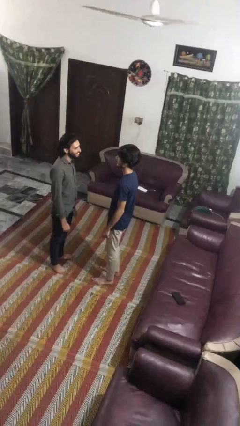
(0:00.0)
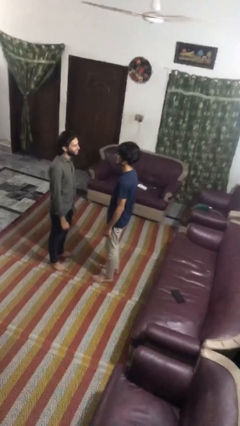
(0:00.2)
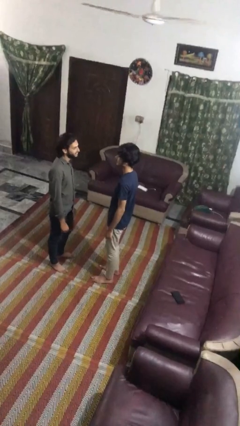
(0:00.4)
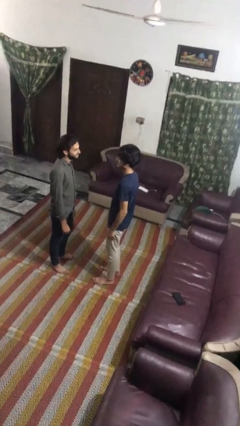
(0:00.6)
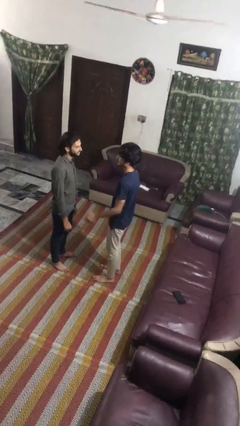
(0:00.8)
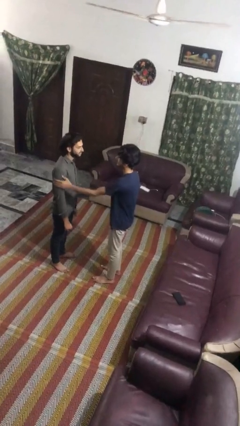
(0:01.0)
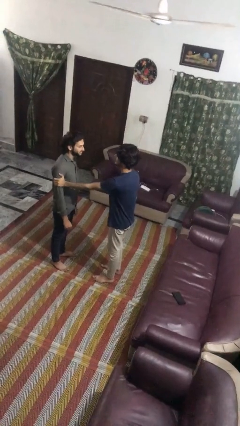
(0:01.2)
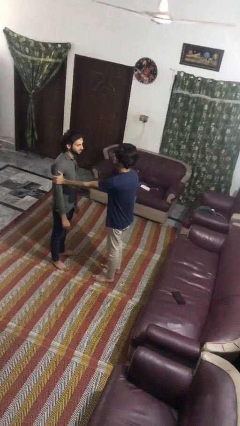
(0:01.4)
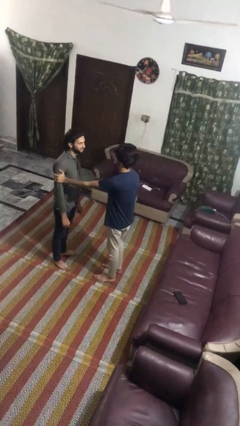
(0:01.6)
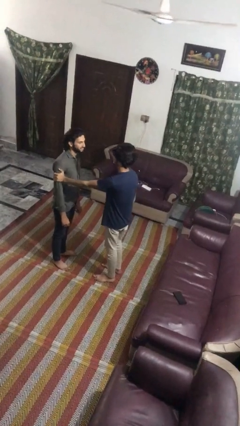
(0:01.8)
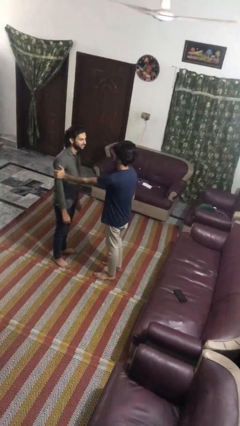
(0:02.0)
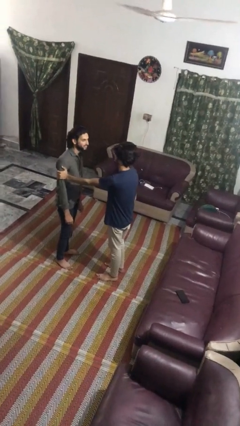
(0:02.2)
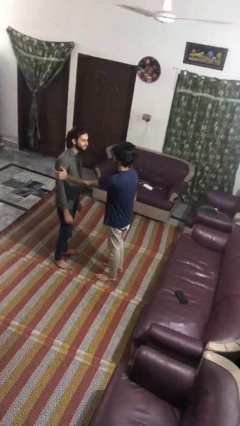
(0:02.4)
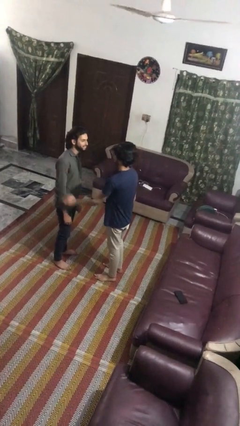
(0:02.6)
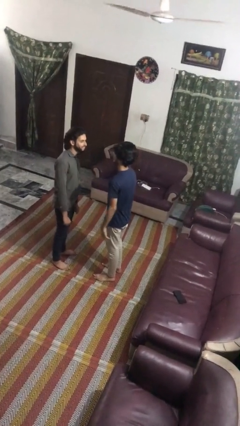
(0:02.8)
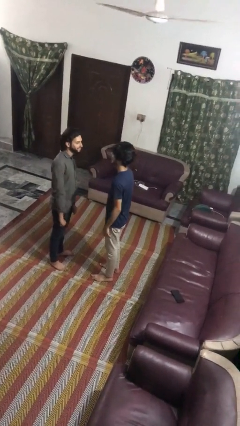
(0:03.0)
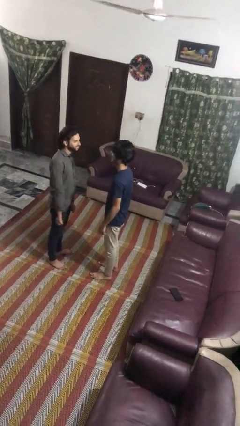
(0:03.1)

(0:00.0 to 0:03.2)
person grabs person by bicep

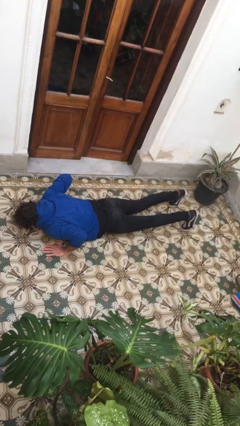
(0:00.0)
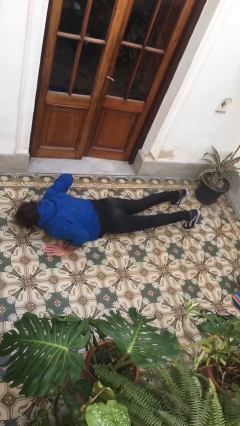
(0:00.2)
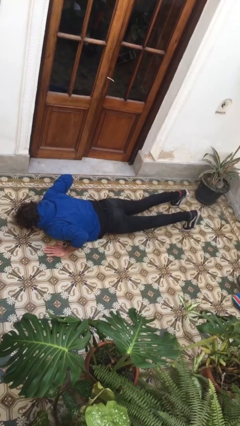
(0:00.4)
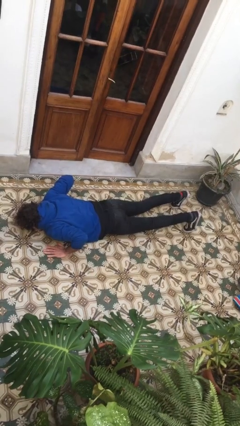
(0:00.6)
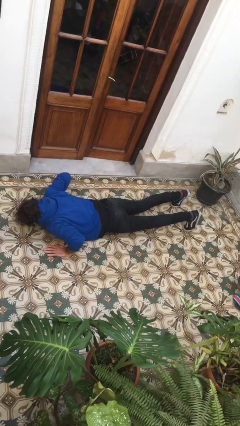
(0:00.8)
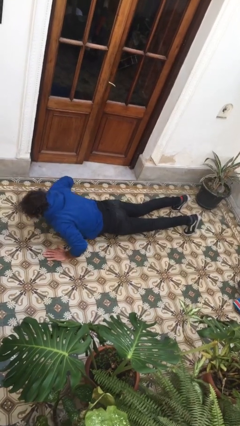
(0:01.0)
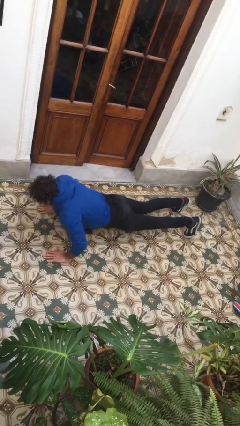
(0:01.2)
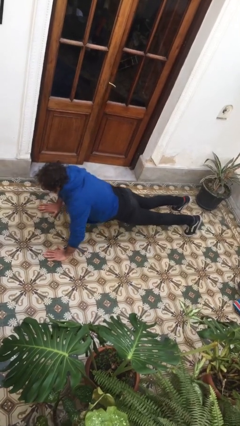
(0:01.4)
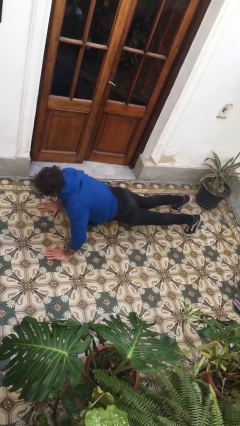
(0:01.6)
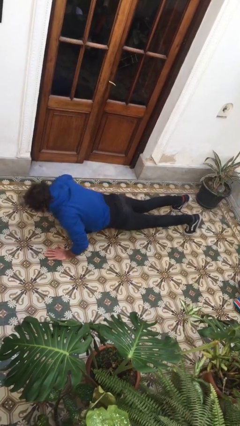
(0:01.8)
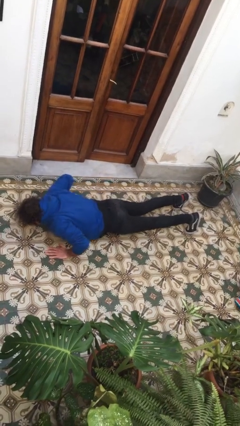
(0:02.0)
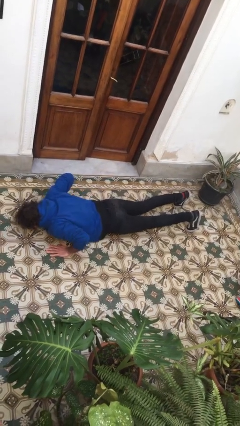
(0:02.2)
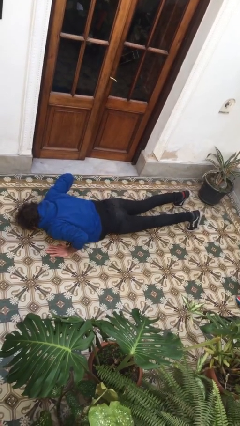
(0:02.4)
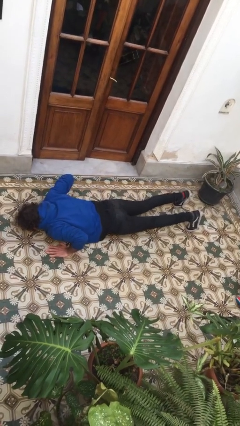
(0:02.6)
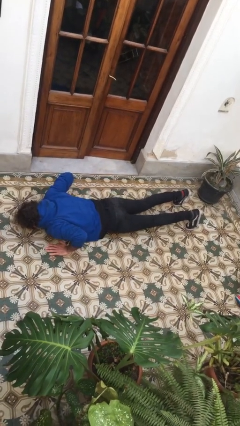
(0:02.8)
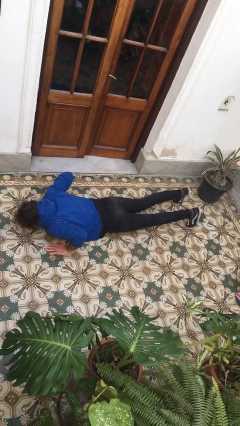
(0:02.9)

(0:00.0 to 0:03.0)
person exercises with pushup

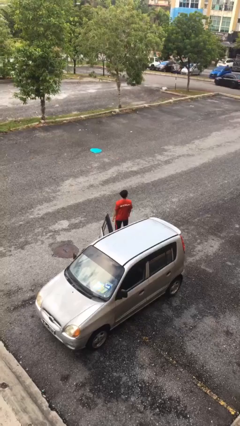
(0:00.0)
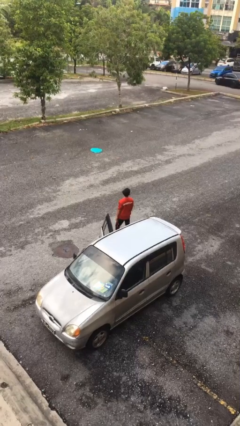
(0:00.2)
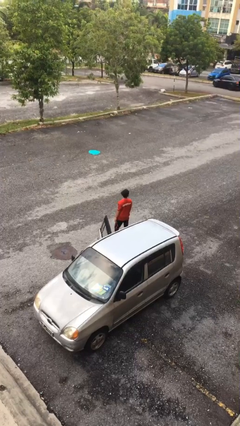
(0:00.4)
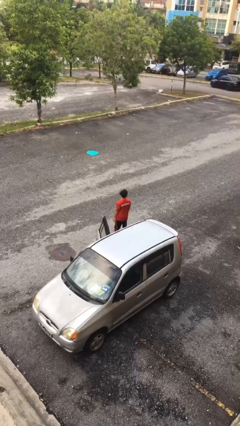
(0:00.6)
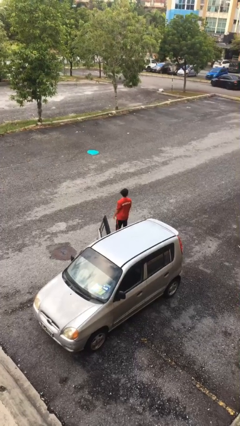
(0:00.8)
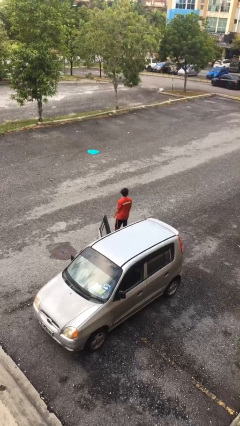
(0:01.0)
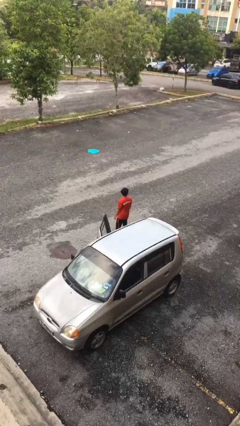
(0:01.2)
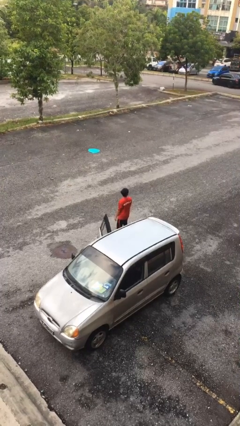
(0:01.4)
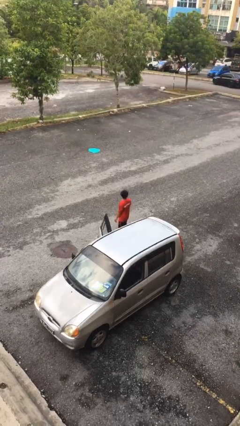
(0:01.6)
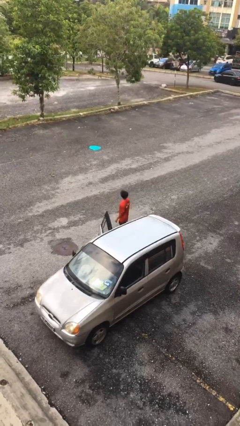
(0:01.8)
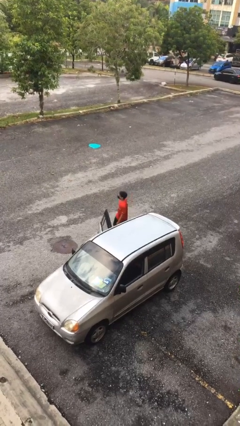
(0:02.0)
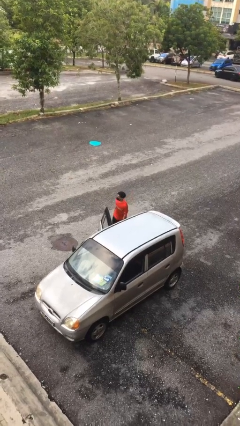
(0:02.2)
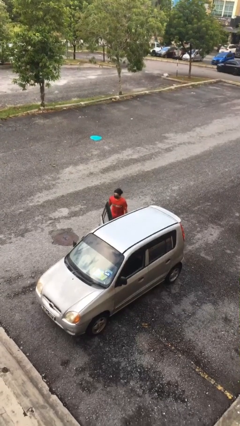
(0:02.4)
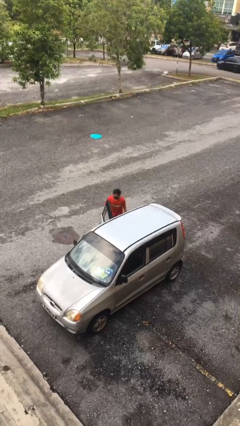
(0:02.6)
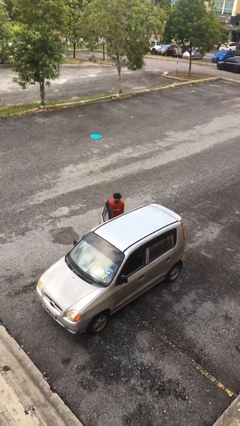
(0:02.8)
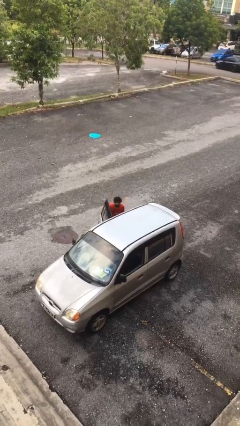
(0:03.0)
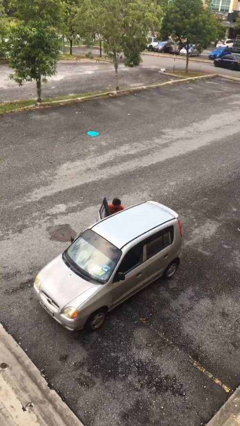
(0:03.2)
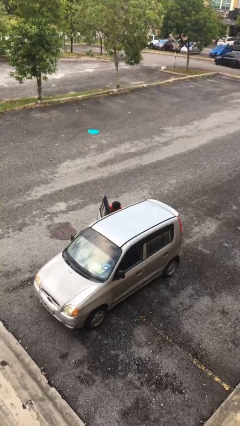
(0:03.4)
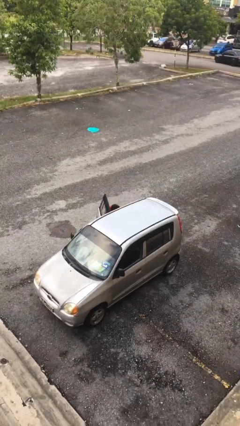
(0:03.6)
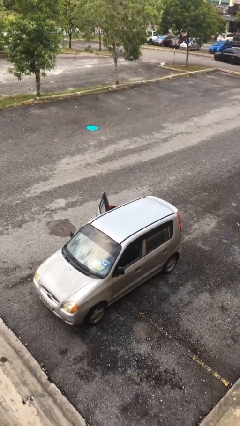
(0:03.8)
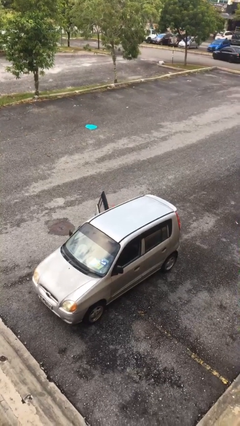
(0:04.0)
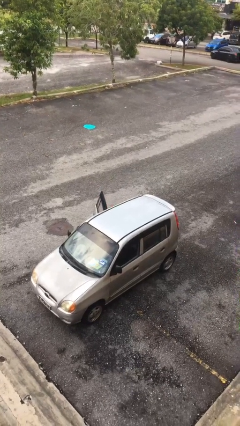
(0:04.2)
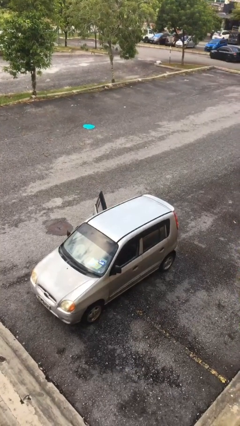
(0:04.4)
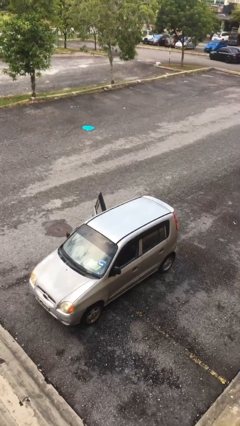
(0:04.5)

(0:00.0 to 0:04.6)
person enters car

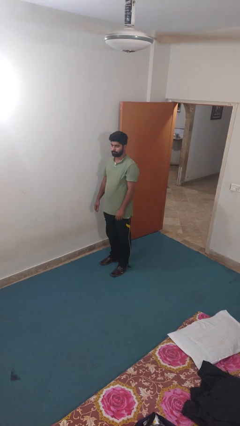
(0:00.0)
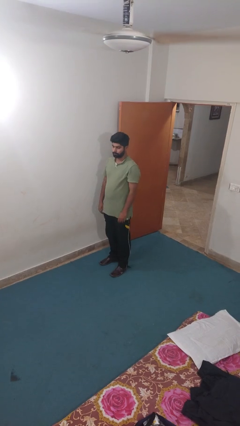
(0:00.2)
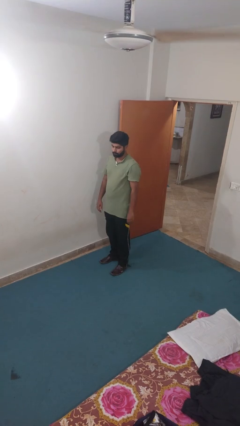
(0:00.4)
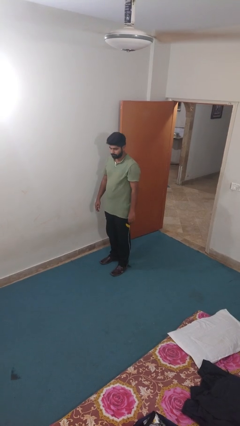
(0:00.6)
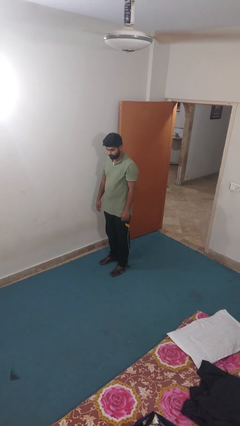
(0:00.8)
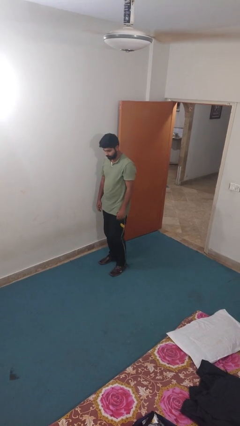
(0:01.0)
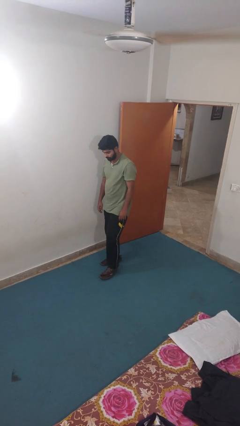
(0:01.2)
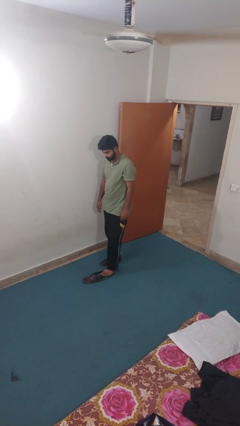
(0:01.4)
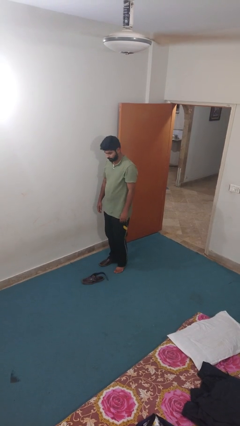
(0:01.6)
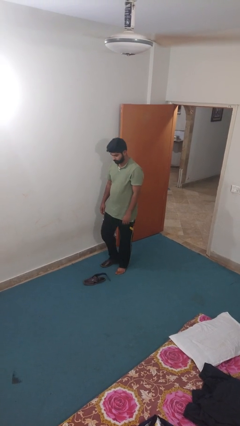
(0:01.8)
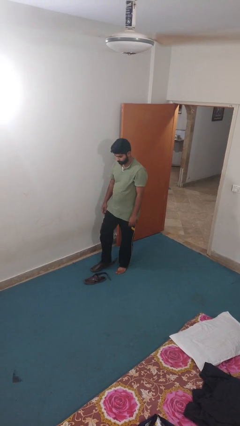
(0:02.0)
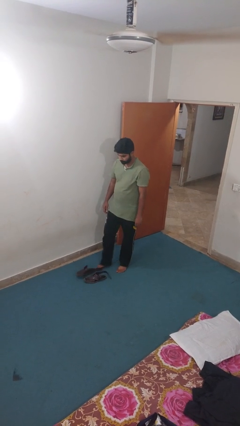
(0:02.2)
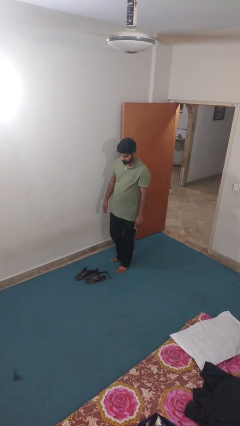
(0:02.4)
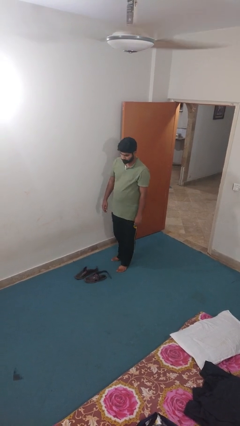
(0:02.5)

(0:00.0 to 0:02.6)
person takes off shoes

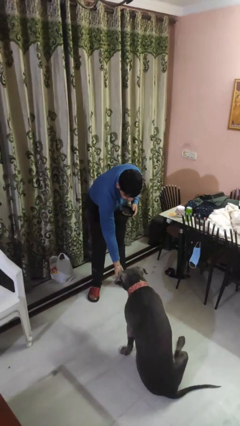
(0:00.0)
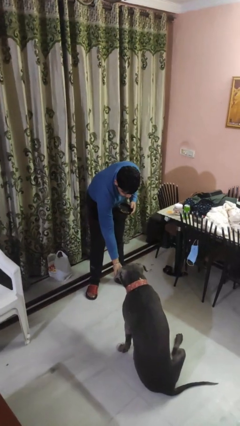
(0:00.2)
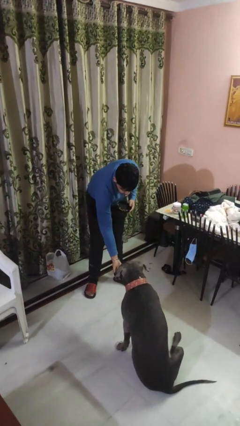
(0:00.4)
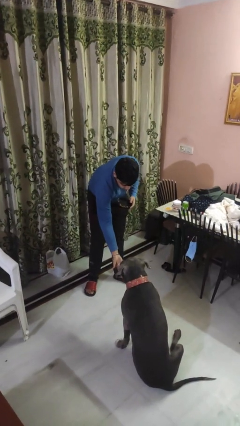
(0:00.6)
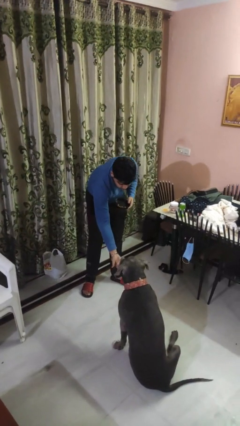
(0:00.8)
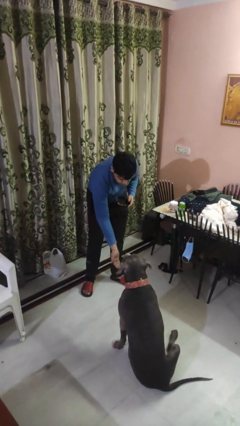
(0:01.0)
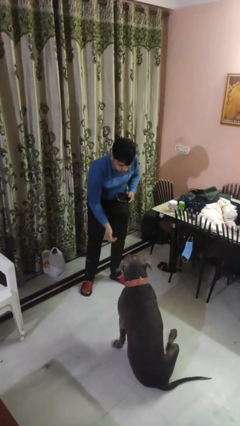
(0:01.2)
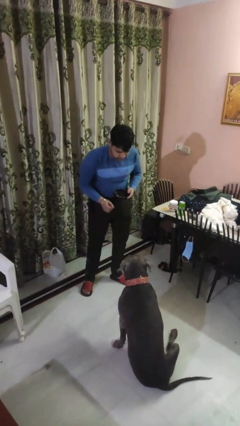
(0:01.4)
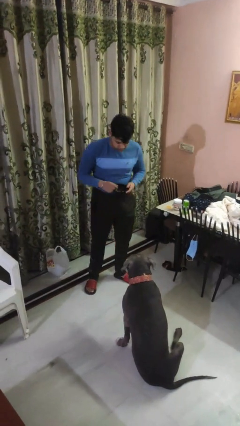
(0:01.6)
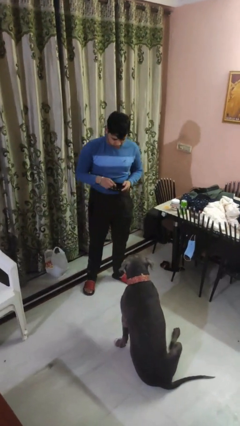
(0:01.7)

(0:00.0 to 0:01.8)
person feeds dog

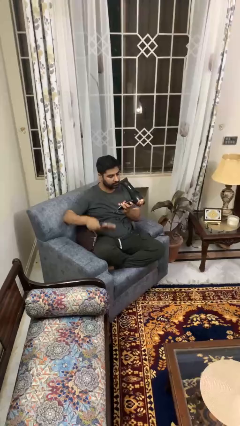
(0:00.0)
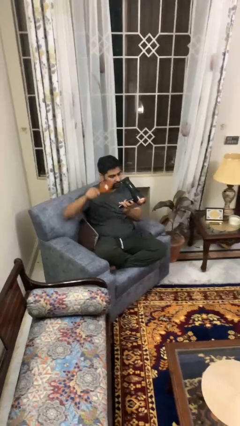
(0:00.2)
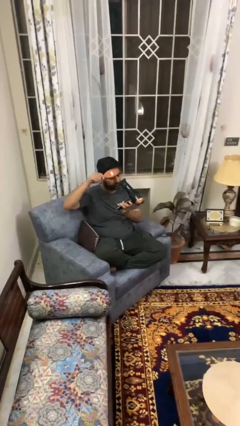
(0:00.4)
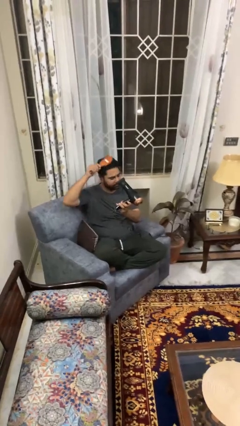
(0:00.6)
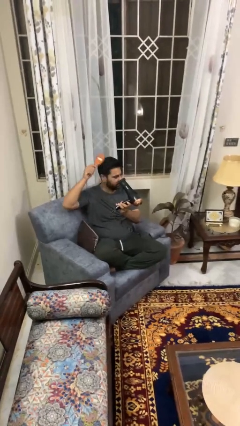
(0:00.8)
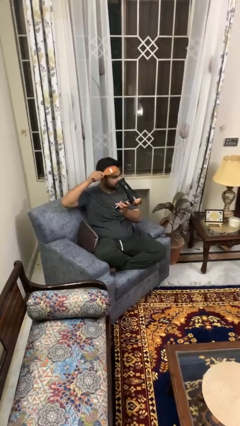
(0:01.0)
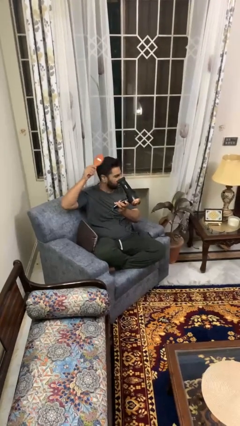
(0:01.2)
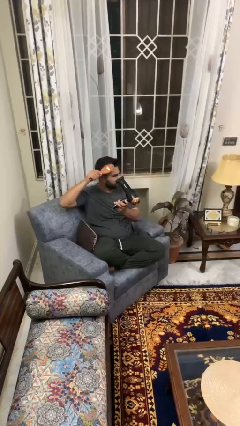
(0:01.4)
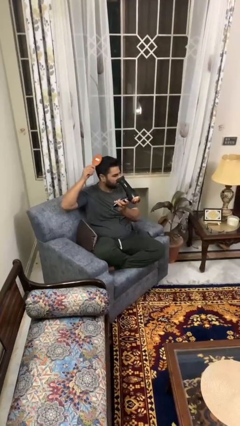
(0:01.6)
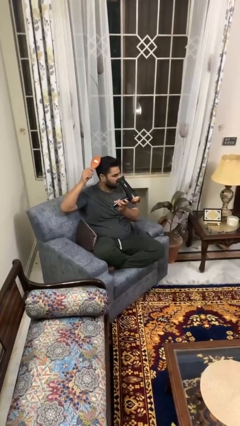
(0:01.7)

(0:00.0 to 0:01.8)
person dries hair with hairdryer

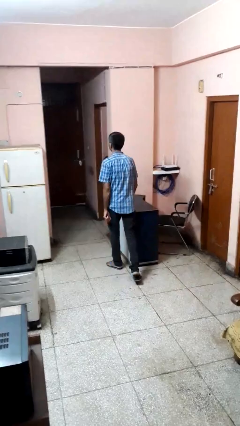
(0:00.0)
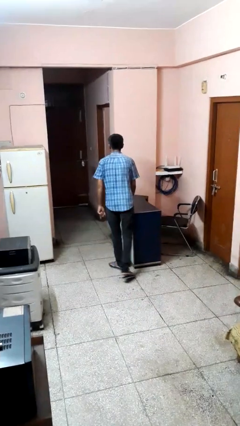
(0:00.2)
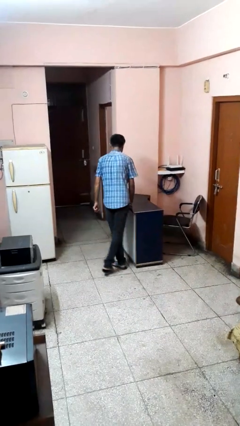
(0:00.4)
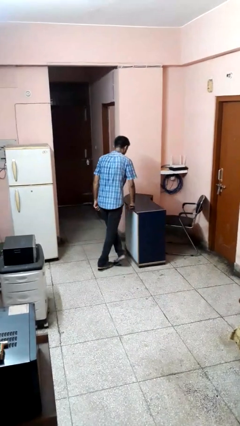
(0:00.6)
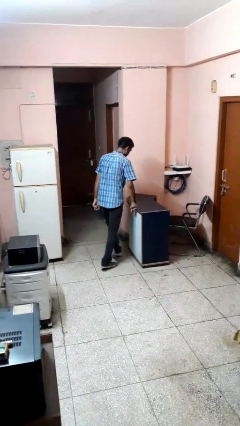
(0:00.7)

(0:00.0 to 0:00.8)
person bumps into table
